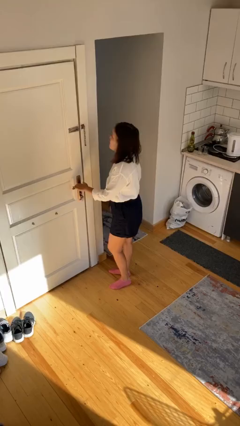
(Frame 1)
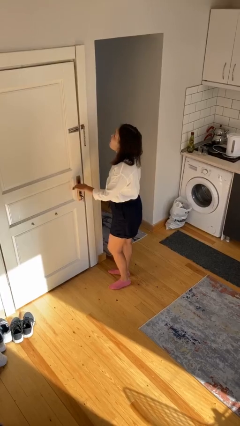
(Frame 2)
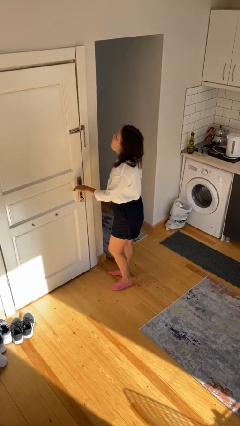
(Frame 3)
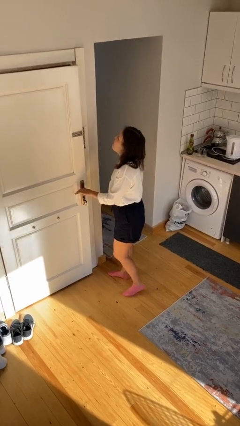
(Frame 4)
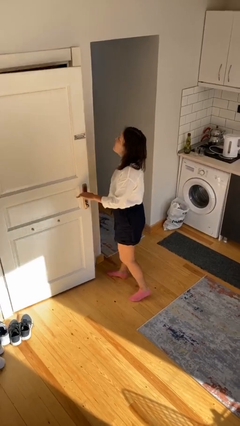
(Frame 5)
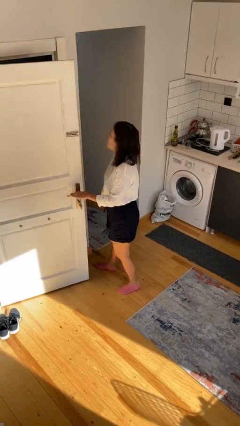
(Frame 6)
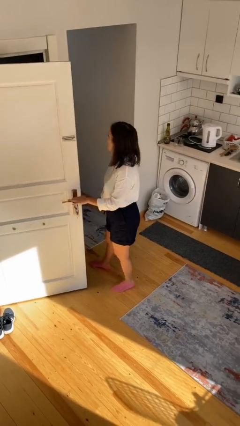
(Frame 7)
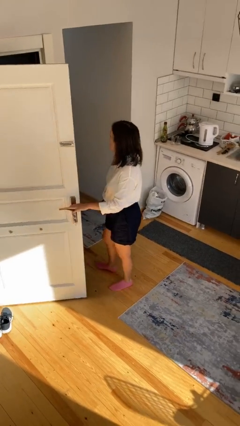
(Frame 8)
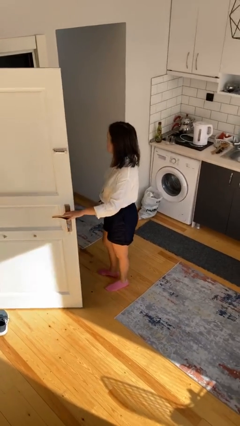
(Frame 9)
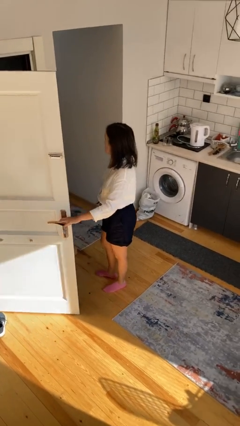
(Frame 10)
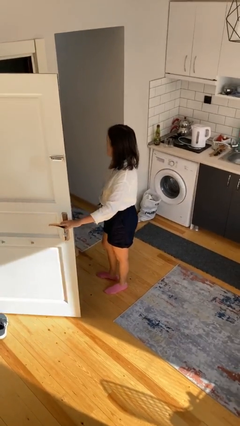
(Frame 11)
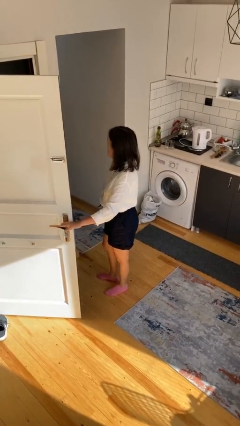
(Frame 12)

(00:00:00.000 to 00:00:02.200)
person opens facility door

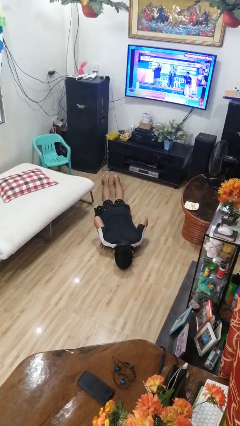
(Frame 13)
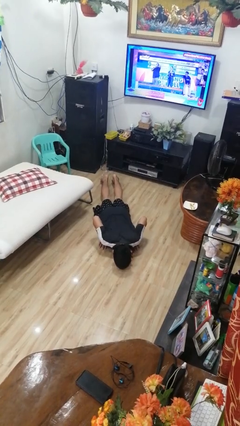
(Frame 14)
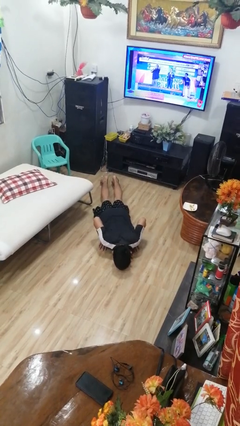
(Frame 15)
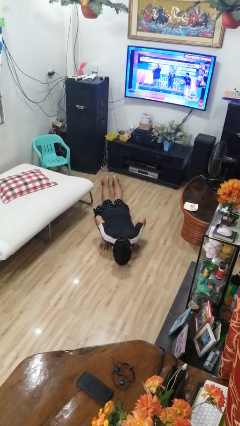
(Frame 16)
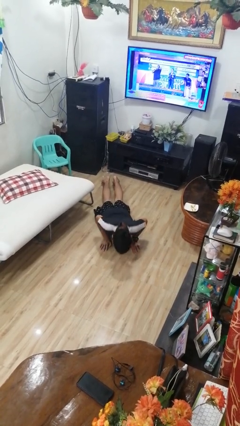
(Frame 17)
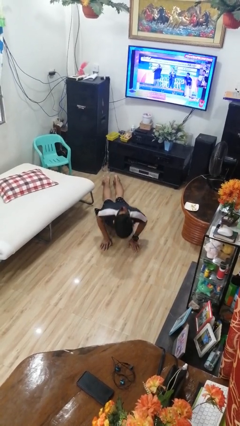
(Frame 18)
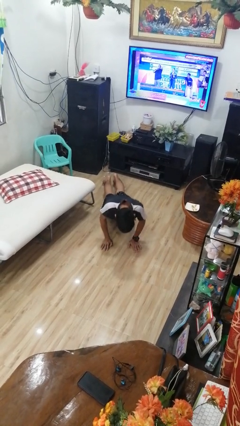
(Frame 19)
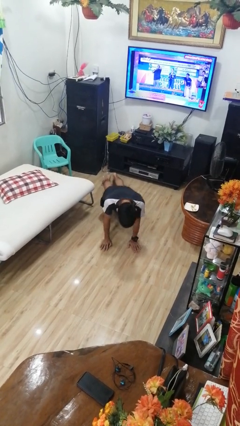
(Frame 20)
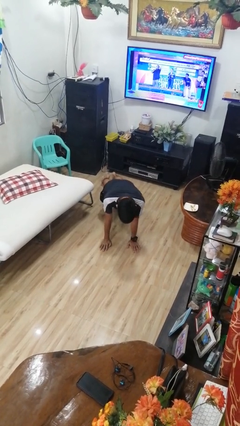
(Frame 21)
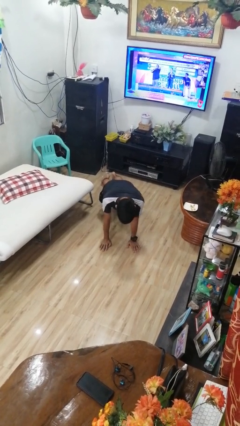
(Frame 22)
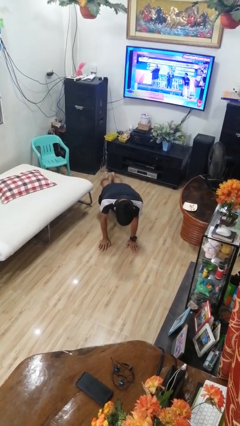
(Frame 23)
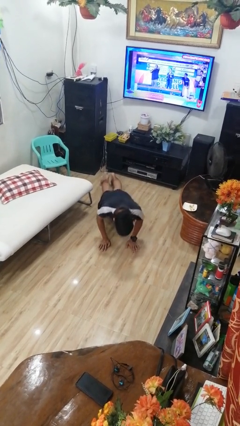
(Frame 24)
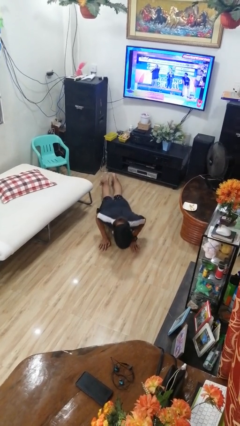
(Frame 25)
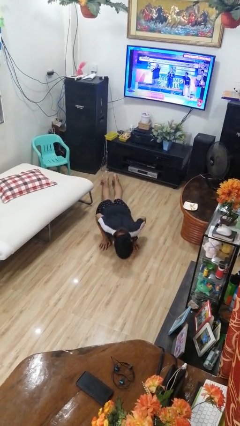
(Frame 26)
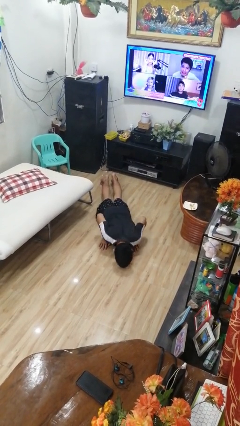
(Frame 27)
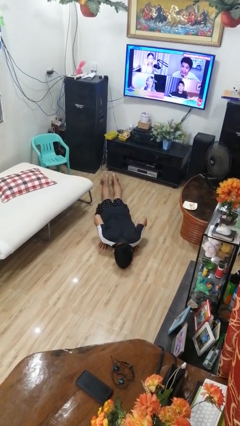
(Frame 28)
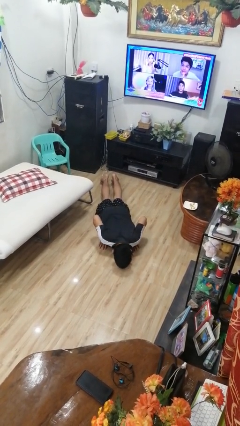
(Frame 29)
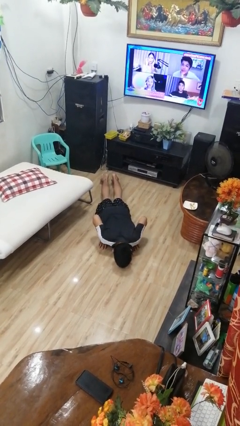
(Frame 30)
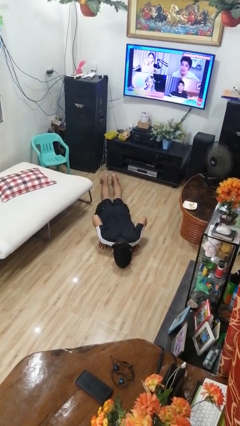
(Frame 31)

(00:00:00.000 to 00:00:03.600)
person exercises with pushup

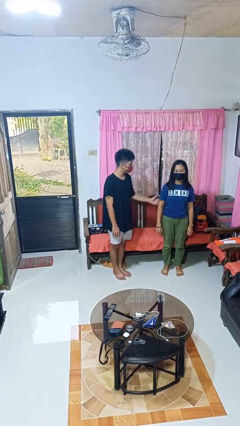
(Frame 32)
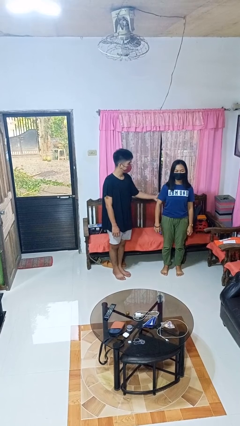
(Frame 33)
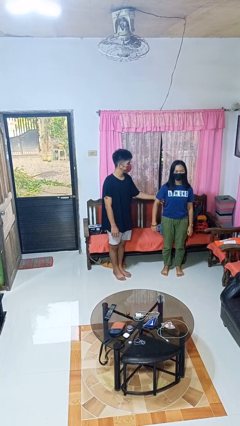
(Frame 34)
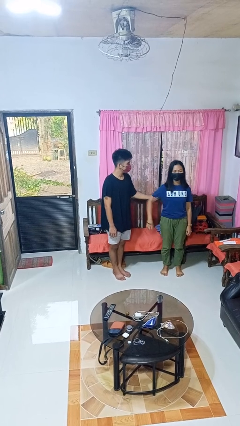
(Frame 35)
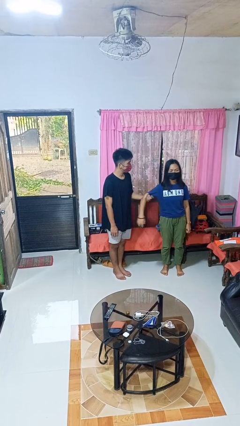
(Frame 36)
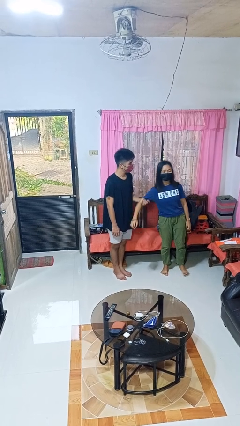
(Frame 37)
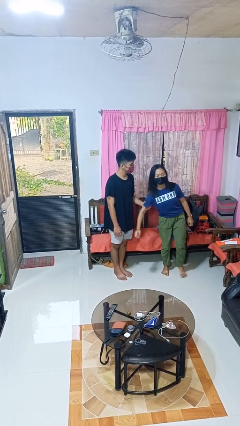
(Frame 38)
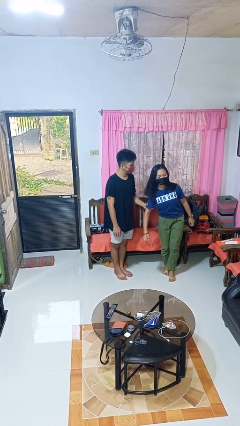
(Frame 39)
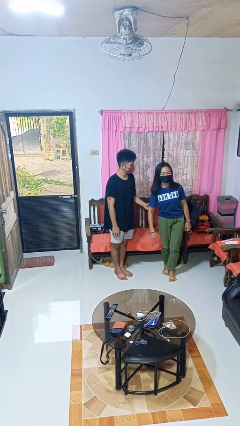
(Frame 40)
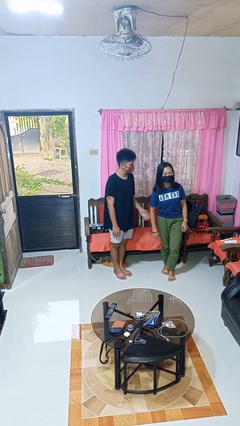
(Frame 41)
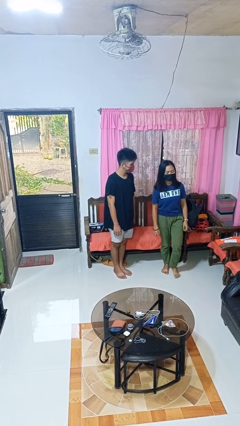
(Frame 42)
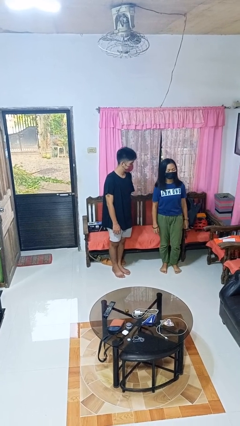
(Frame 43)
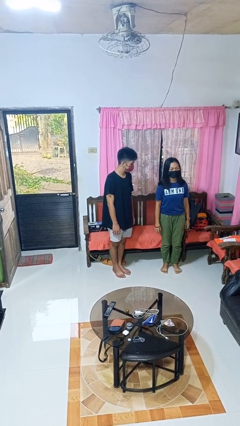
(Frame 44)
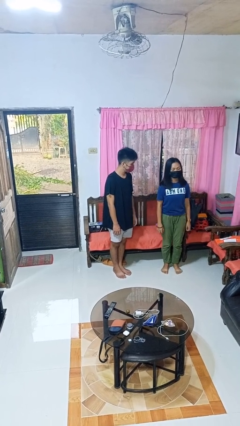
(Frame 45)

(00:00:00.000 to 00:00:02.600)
person grabs person by bicep

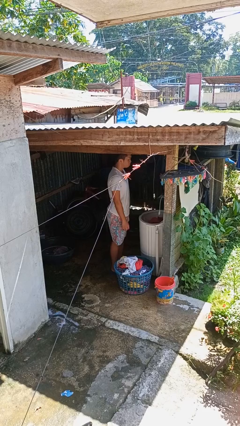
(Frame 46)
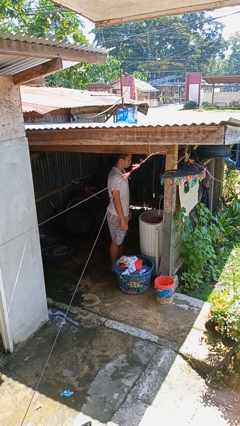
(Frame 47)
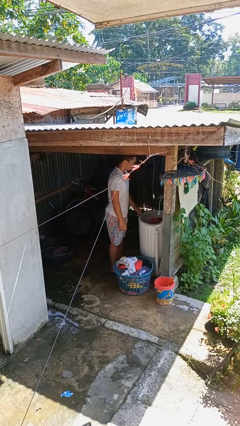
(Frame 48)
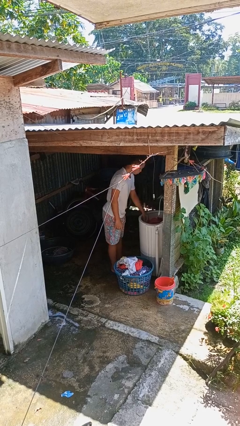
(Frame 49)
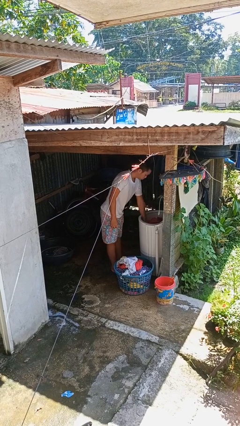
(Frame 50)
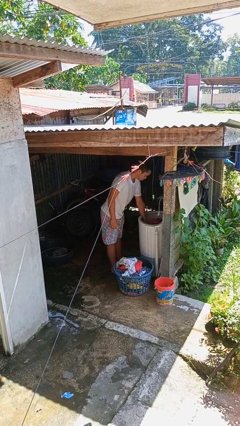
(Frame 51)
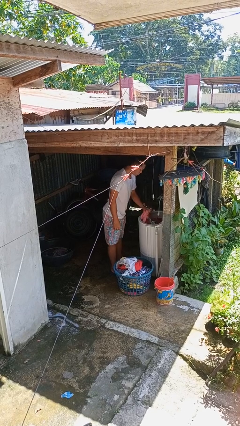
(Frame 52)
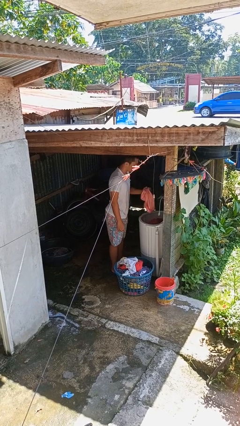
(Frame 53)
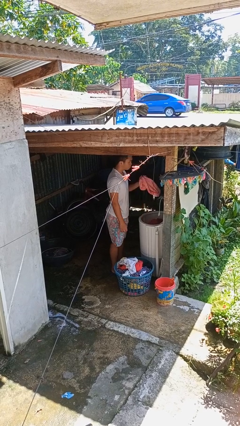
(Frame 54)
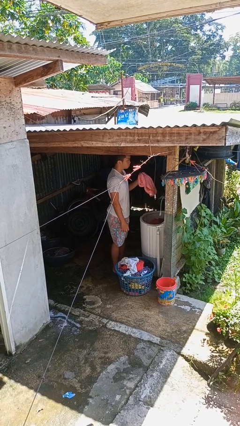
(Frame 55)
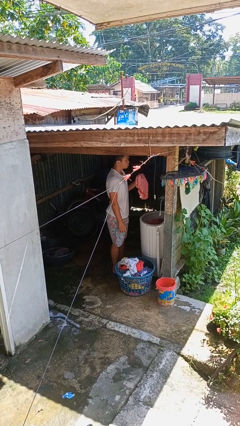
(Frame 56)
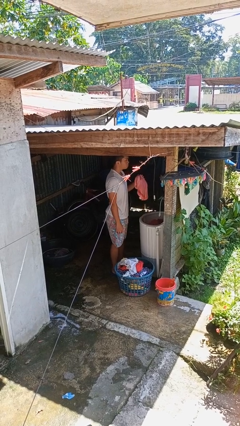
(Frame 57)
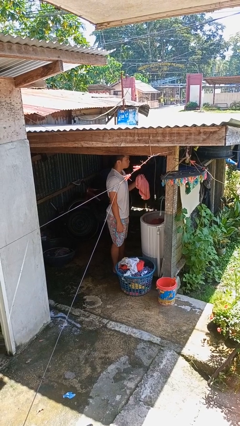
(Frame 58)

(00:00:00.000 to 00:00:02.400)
person unloads clotheswasher

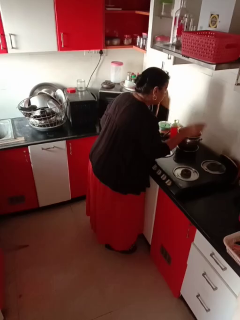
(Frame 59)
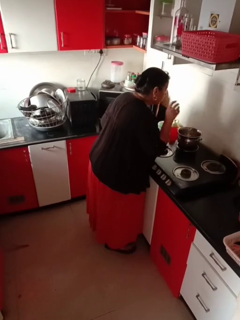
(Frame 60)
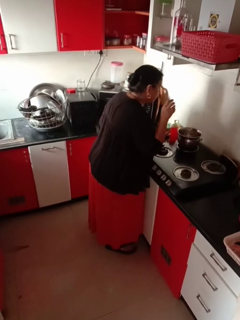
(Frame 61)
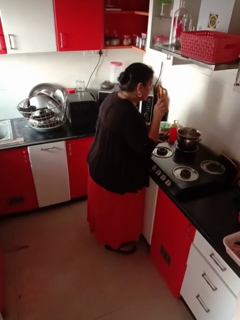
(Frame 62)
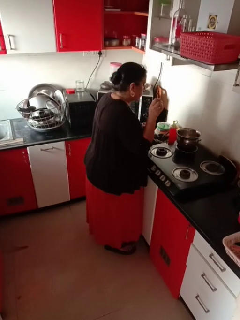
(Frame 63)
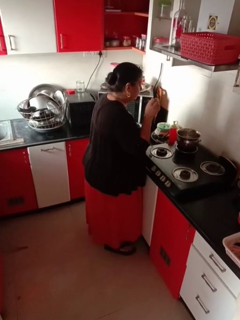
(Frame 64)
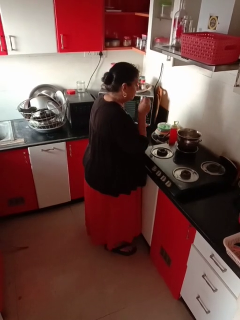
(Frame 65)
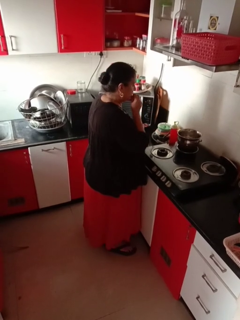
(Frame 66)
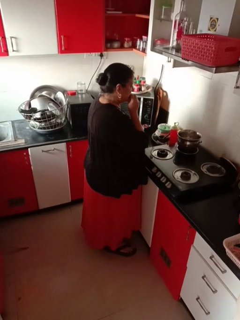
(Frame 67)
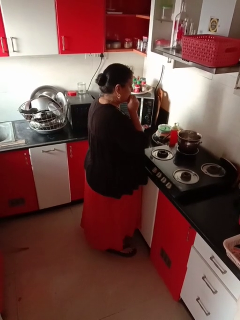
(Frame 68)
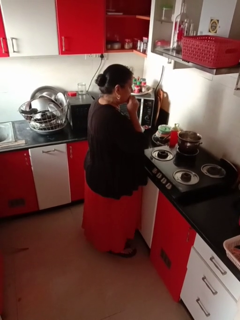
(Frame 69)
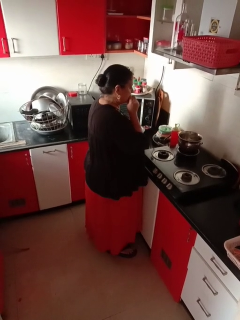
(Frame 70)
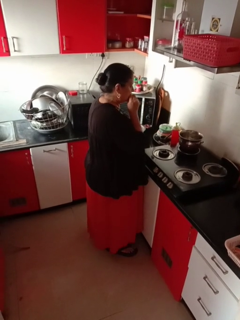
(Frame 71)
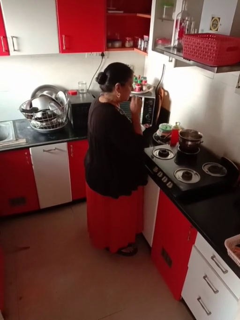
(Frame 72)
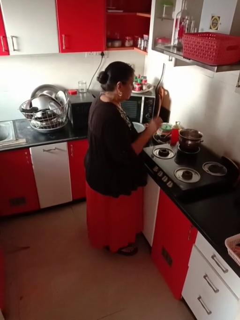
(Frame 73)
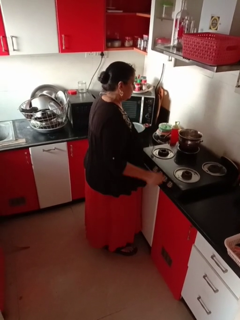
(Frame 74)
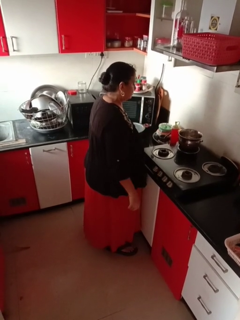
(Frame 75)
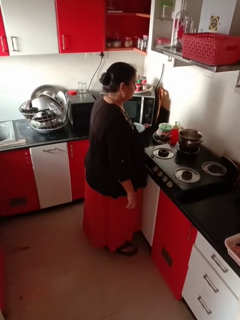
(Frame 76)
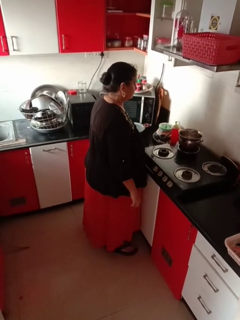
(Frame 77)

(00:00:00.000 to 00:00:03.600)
person burns hand

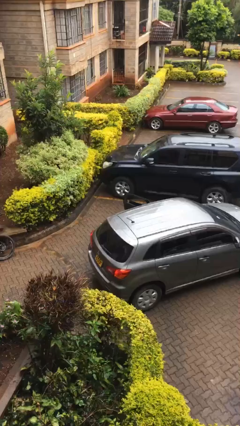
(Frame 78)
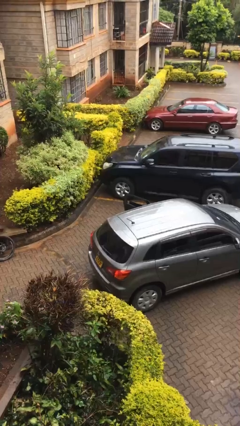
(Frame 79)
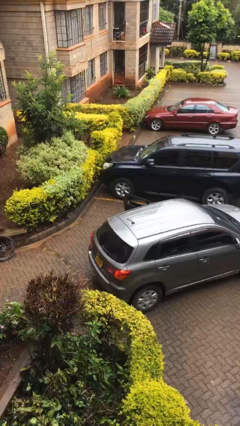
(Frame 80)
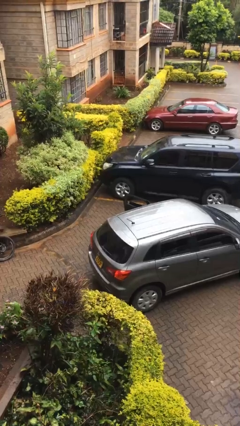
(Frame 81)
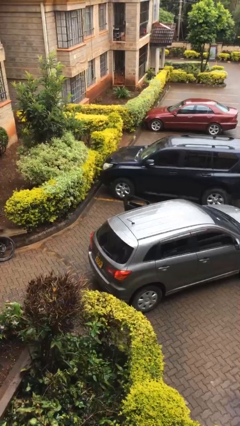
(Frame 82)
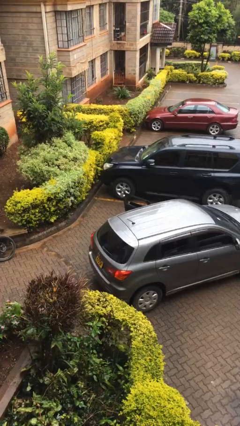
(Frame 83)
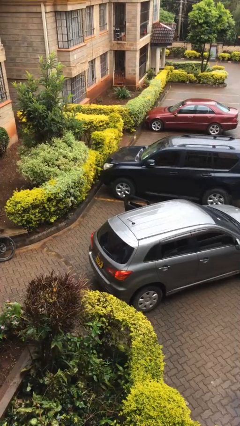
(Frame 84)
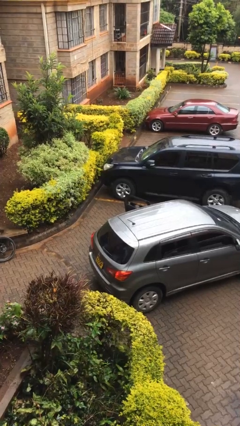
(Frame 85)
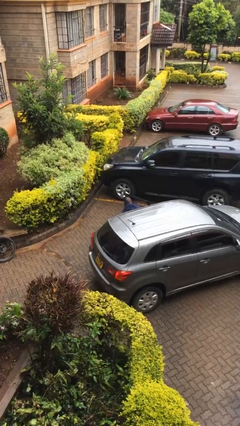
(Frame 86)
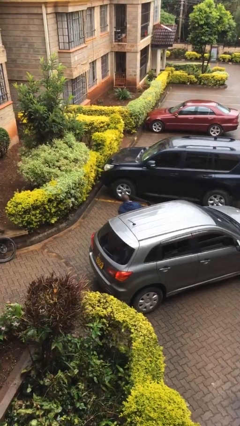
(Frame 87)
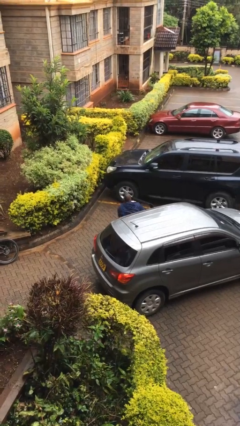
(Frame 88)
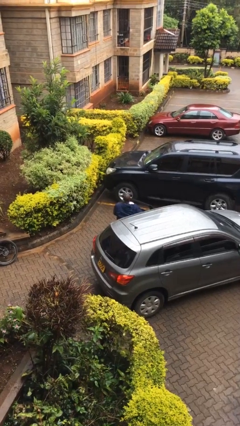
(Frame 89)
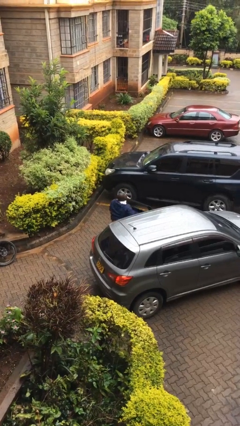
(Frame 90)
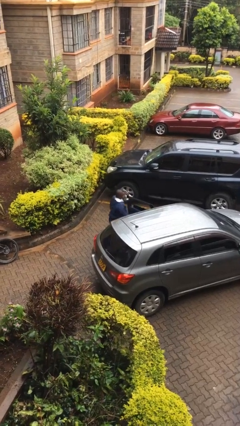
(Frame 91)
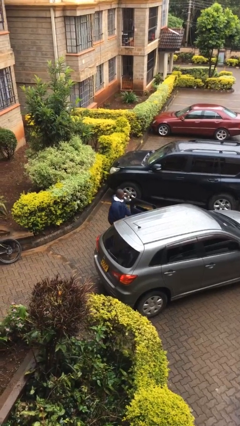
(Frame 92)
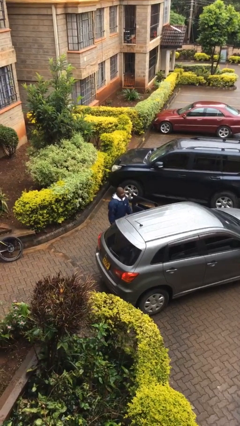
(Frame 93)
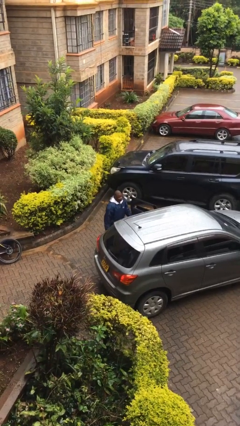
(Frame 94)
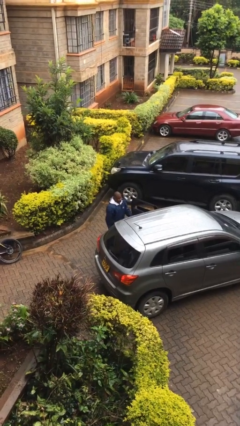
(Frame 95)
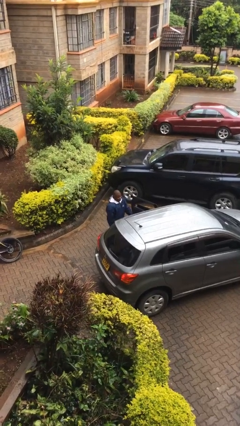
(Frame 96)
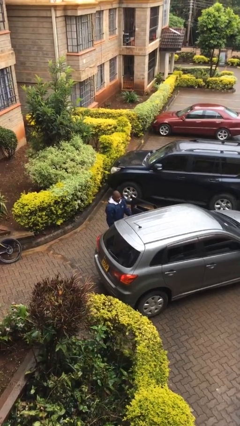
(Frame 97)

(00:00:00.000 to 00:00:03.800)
person exits car
